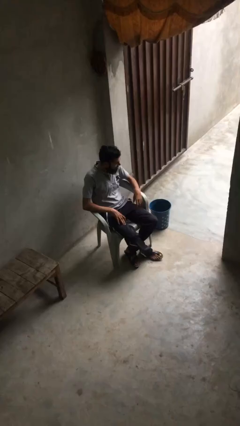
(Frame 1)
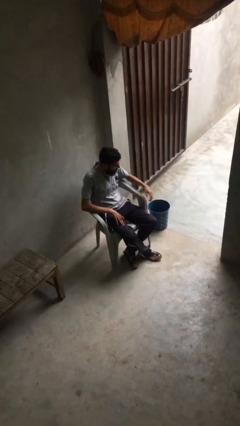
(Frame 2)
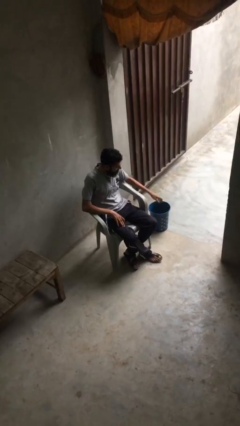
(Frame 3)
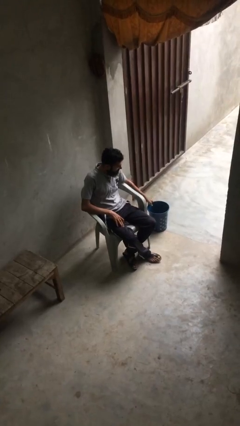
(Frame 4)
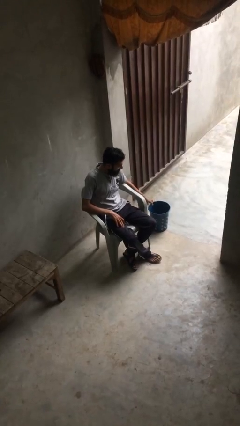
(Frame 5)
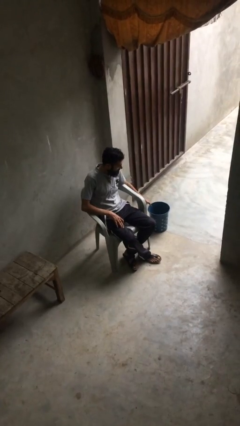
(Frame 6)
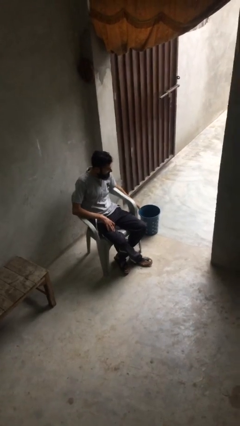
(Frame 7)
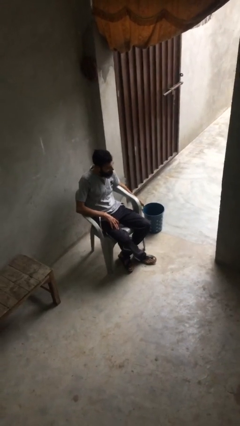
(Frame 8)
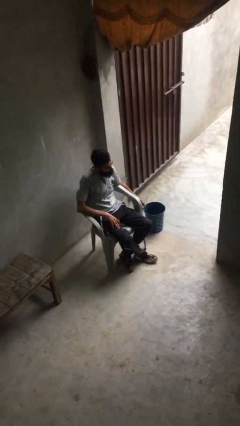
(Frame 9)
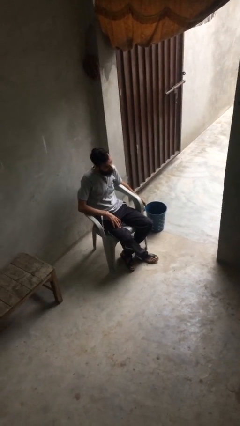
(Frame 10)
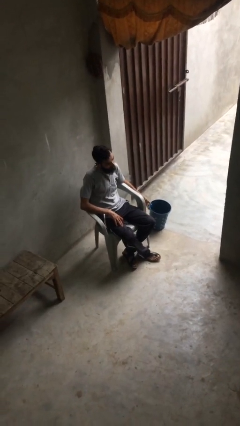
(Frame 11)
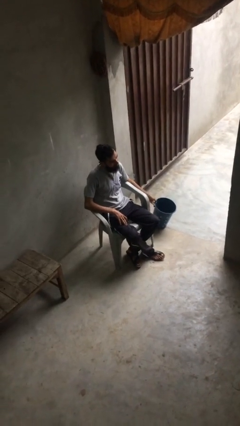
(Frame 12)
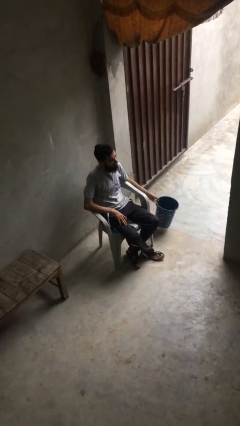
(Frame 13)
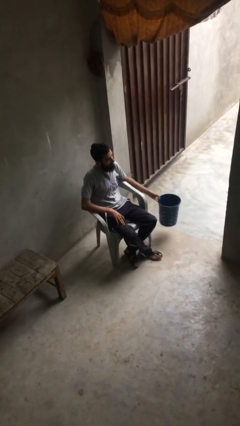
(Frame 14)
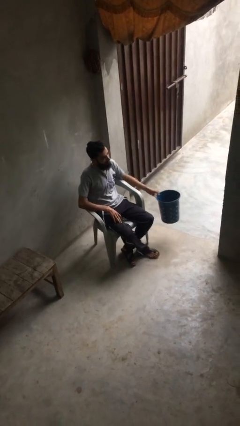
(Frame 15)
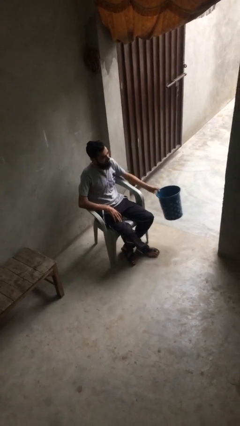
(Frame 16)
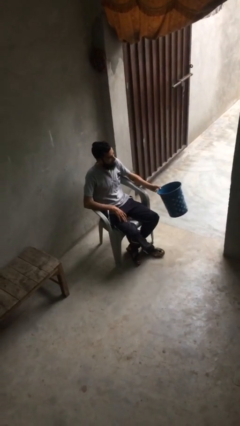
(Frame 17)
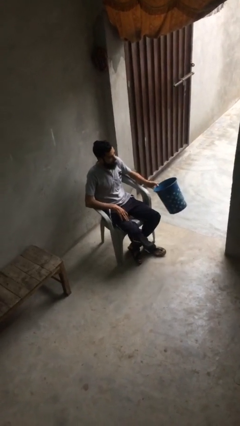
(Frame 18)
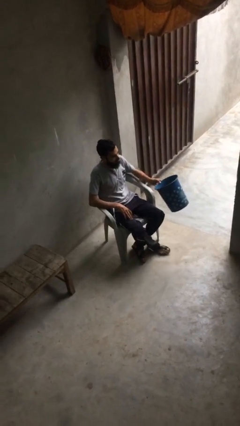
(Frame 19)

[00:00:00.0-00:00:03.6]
person picks up object from floor

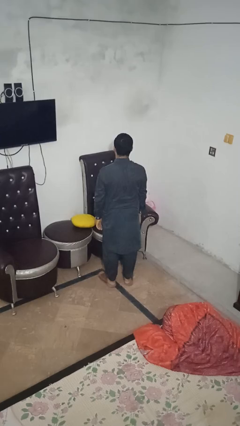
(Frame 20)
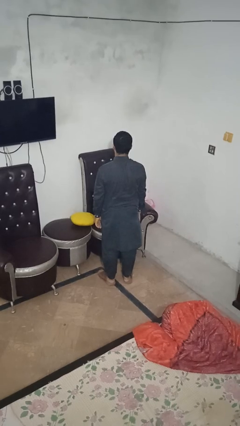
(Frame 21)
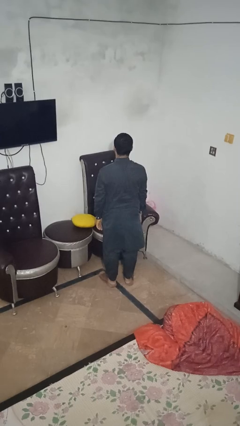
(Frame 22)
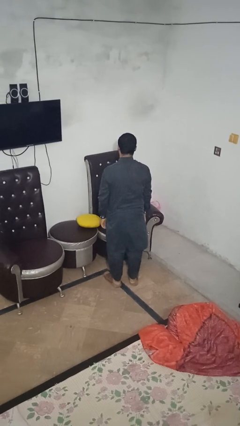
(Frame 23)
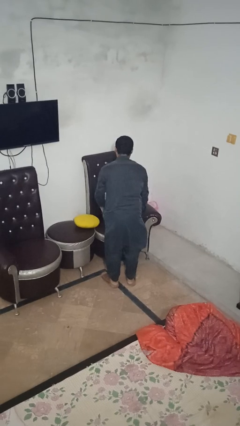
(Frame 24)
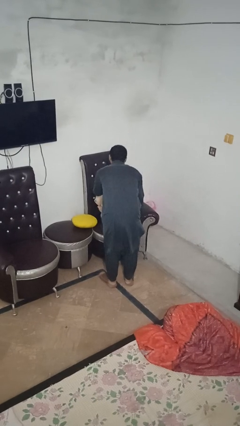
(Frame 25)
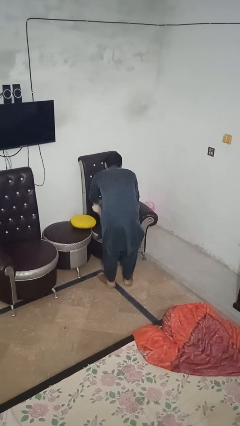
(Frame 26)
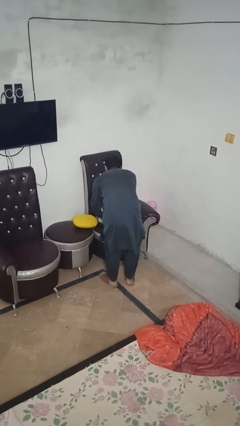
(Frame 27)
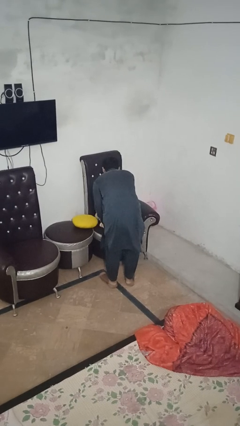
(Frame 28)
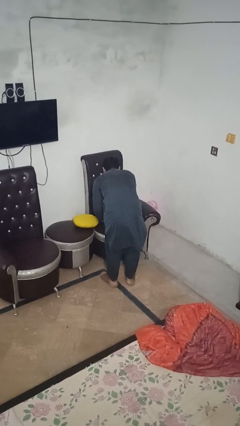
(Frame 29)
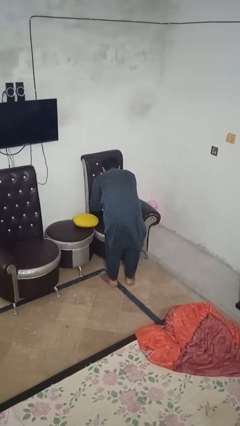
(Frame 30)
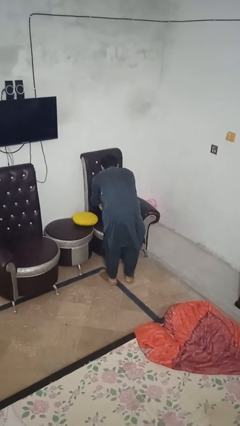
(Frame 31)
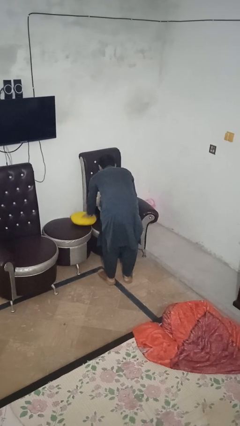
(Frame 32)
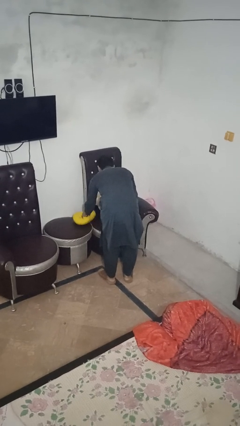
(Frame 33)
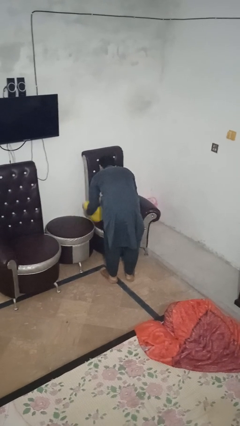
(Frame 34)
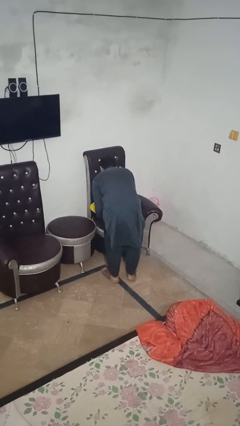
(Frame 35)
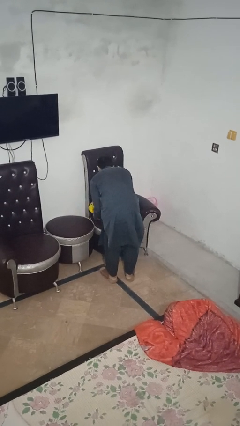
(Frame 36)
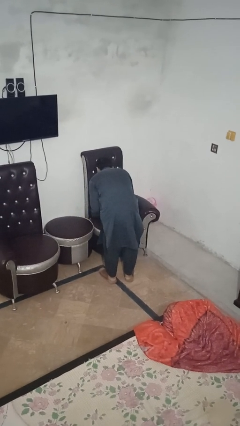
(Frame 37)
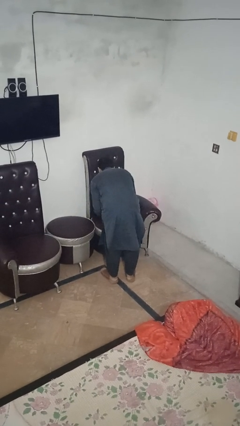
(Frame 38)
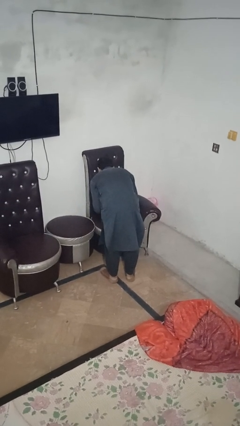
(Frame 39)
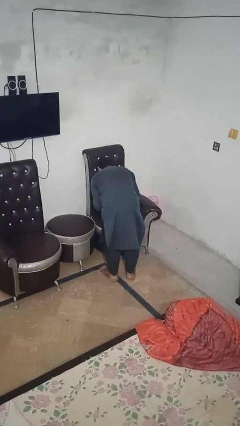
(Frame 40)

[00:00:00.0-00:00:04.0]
person searches in couch

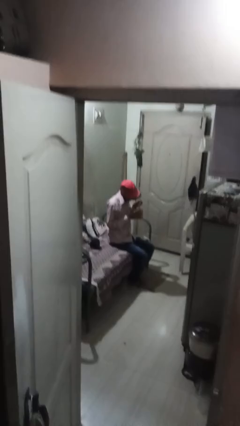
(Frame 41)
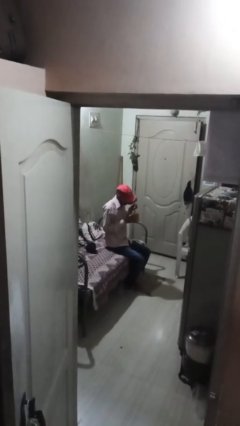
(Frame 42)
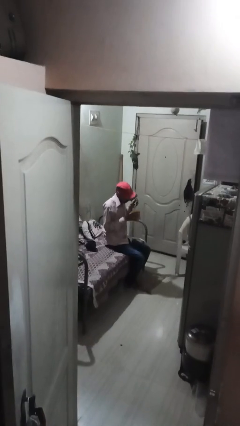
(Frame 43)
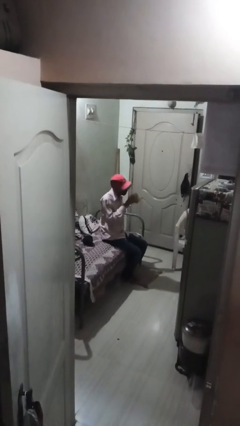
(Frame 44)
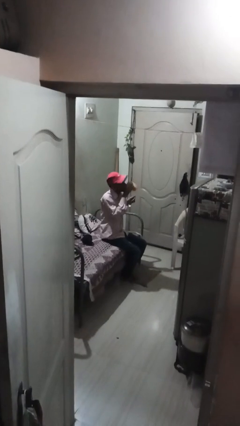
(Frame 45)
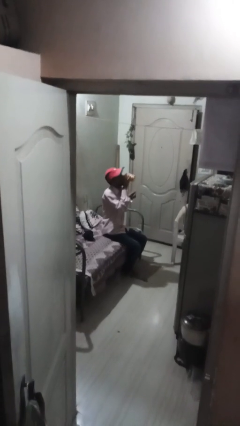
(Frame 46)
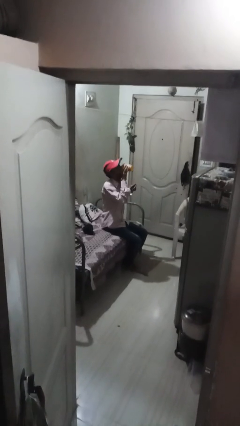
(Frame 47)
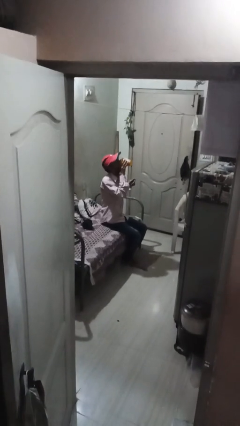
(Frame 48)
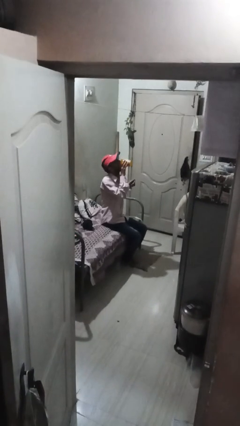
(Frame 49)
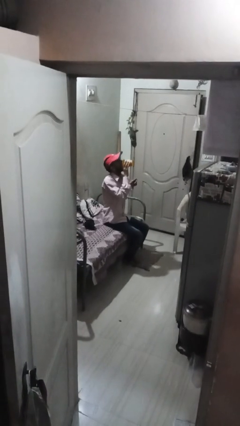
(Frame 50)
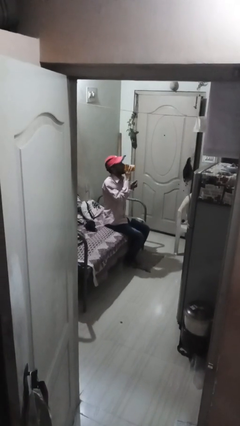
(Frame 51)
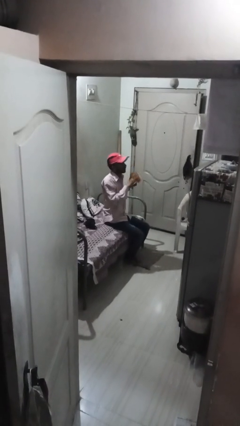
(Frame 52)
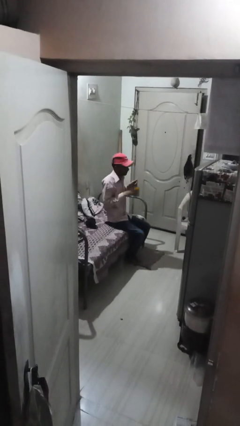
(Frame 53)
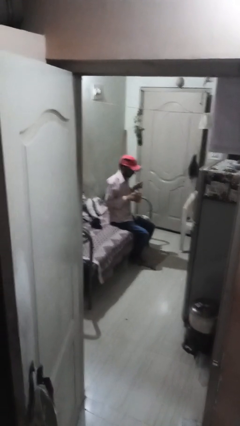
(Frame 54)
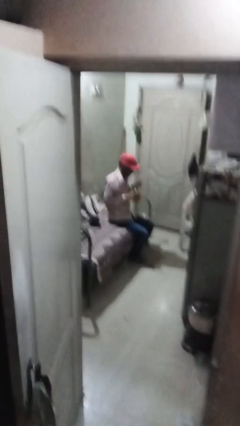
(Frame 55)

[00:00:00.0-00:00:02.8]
person drinks from mug

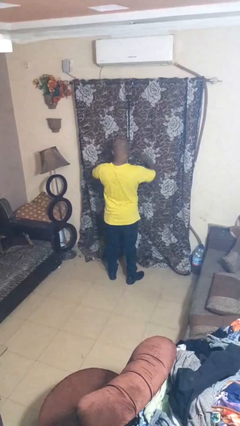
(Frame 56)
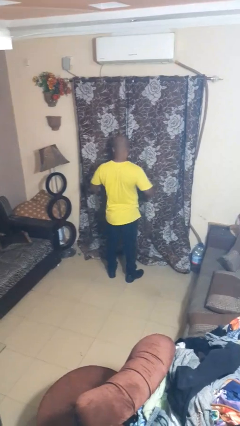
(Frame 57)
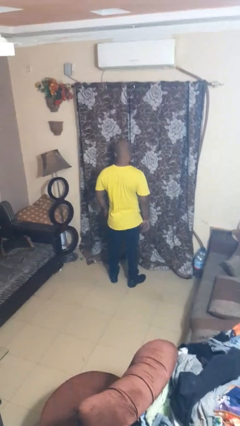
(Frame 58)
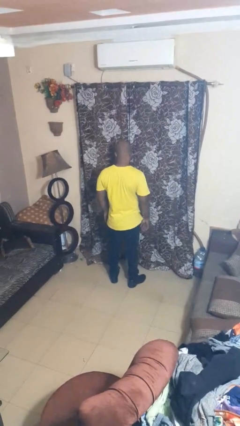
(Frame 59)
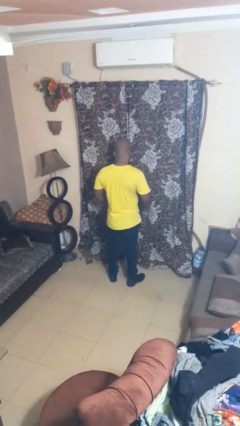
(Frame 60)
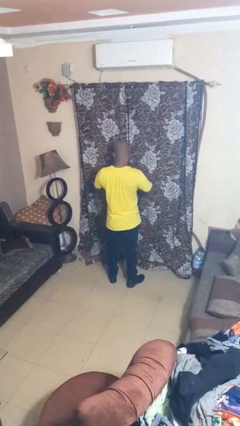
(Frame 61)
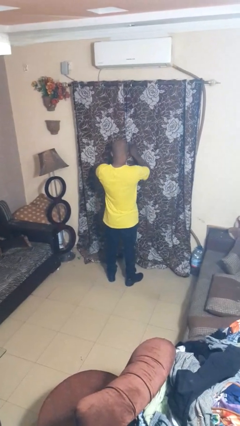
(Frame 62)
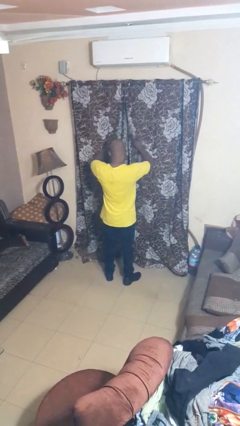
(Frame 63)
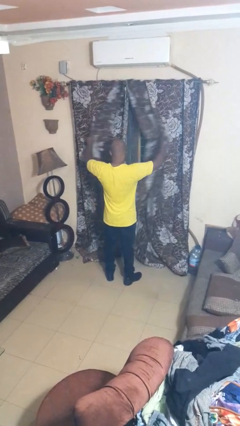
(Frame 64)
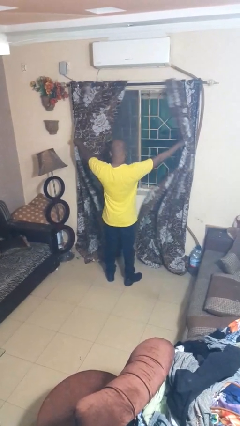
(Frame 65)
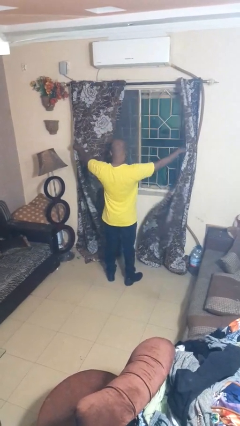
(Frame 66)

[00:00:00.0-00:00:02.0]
person opens curtains

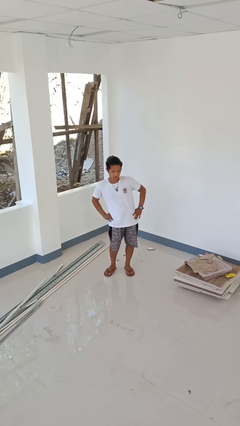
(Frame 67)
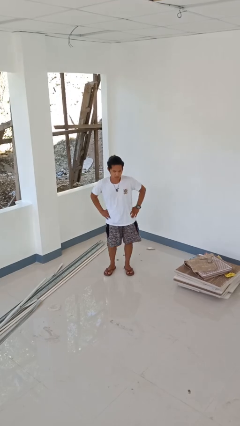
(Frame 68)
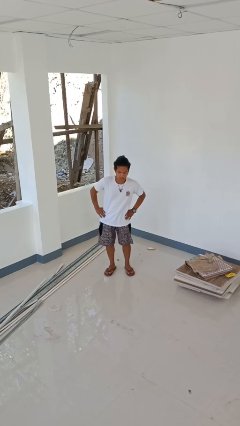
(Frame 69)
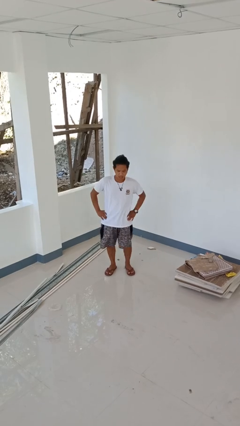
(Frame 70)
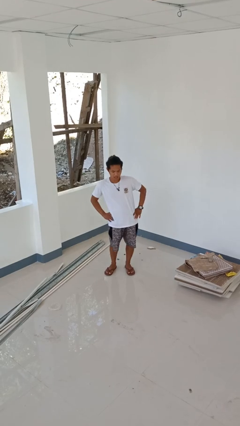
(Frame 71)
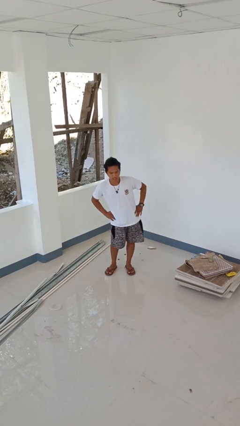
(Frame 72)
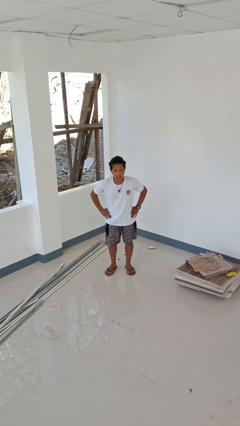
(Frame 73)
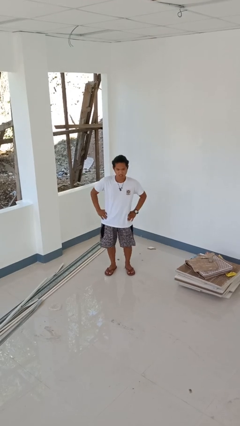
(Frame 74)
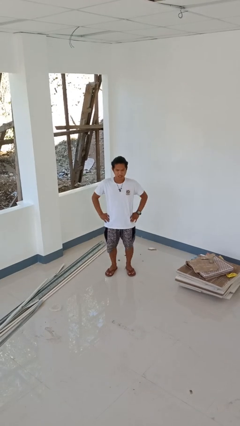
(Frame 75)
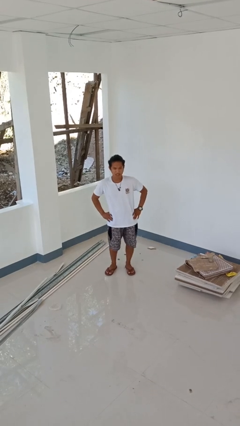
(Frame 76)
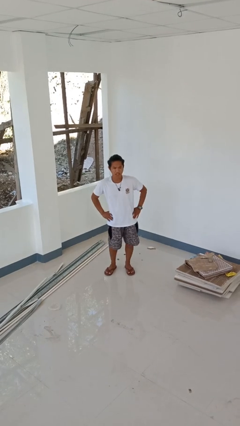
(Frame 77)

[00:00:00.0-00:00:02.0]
person wiggles hips

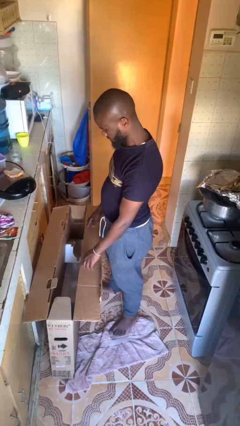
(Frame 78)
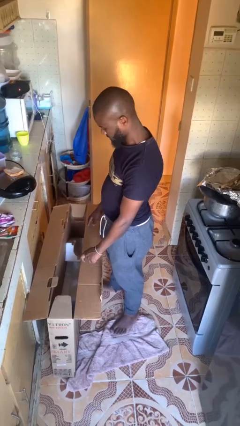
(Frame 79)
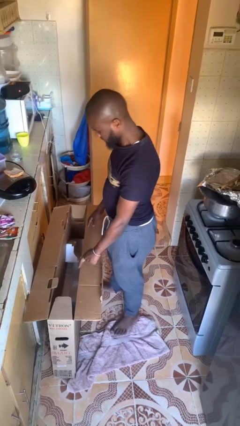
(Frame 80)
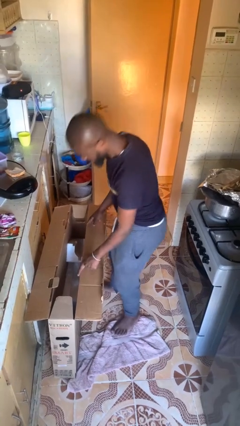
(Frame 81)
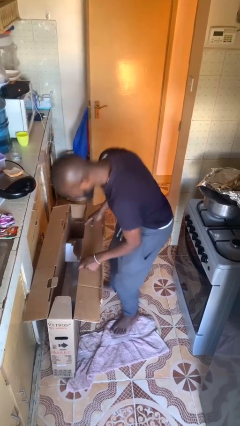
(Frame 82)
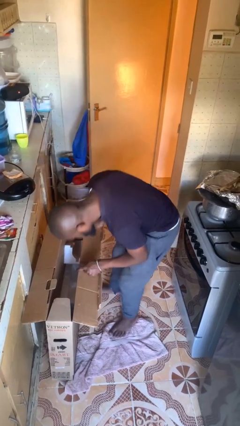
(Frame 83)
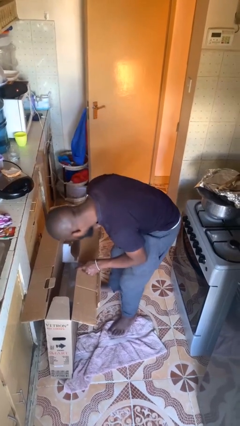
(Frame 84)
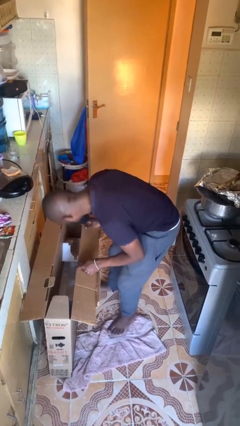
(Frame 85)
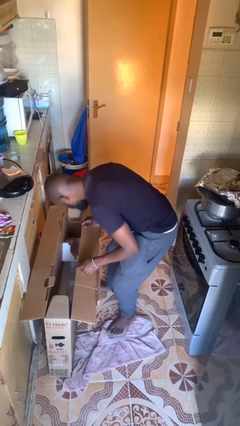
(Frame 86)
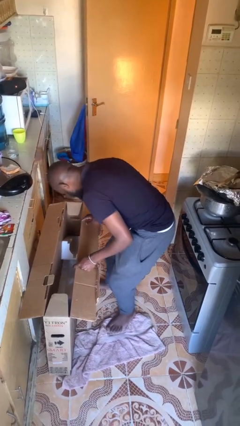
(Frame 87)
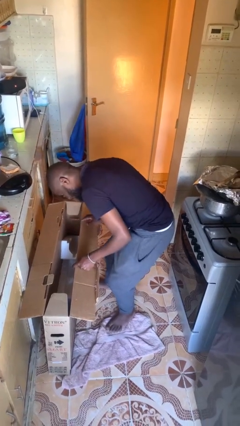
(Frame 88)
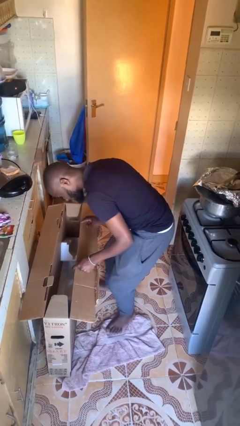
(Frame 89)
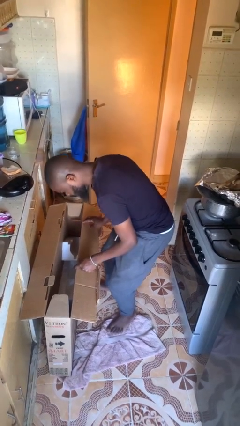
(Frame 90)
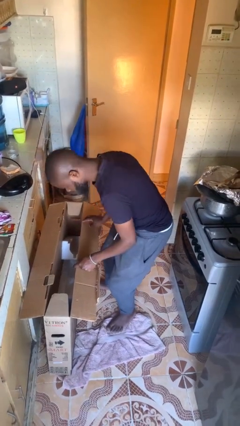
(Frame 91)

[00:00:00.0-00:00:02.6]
person searches in box

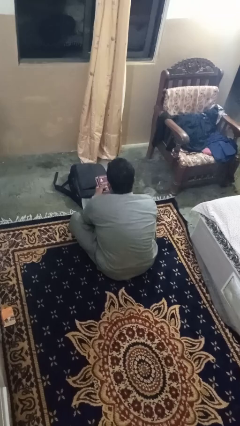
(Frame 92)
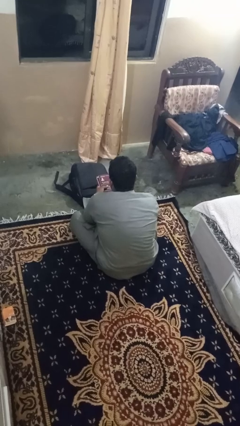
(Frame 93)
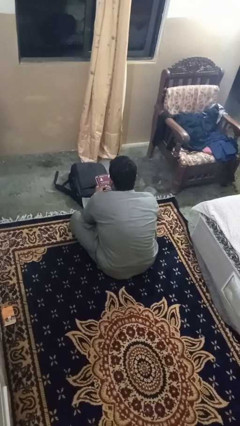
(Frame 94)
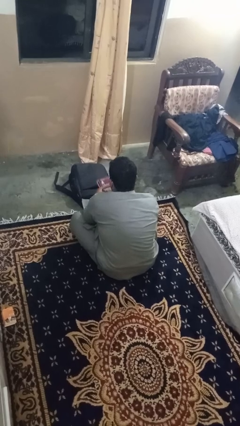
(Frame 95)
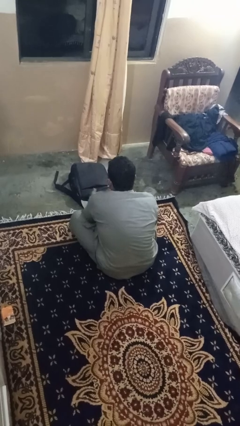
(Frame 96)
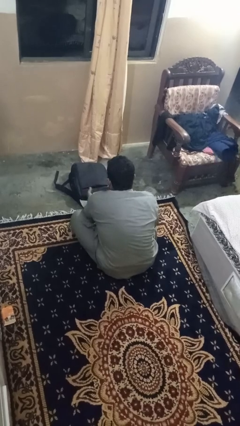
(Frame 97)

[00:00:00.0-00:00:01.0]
person puts object into bag
